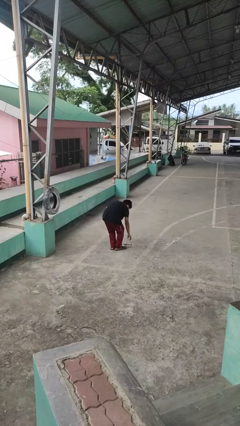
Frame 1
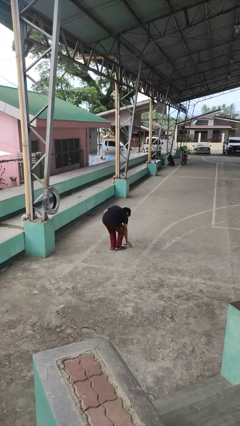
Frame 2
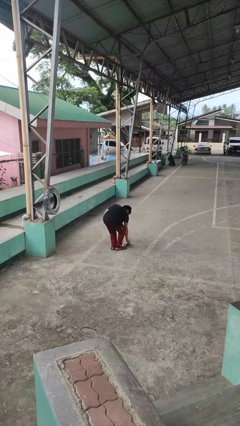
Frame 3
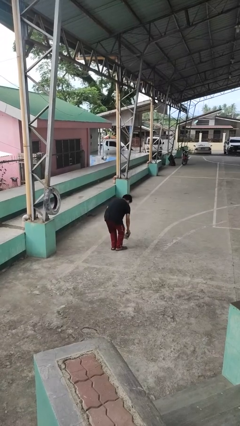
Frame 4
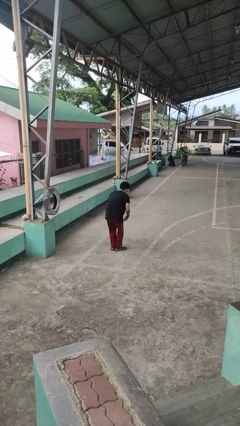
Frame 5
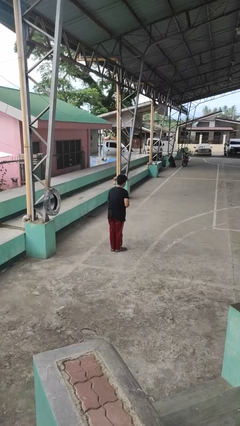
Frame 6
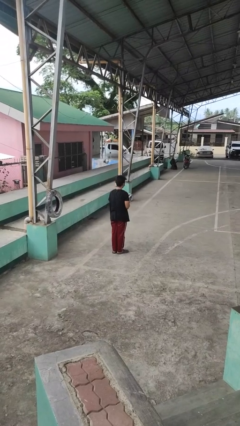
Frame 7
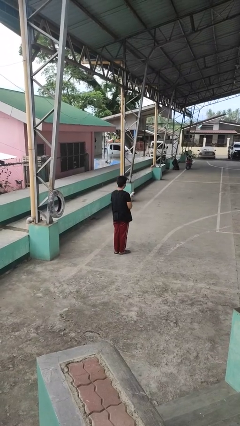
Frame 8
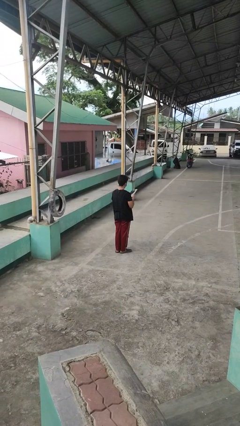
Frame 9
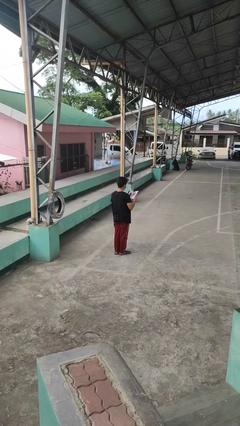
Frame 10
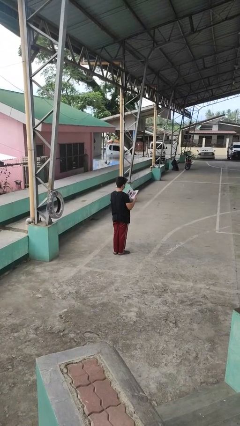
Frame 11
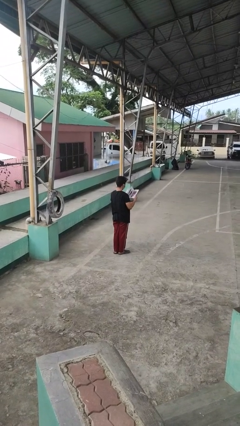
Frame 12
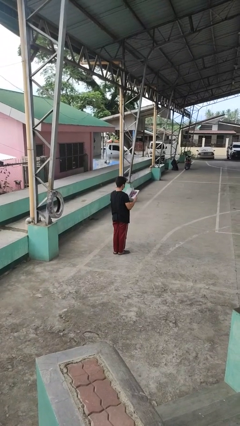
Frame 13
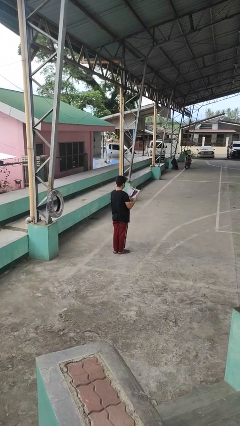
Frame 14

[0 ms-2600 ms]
person picks up object from floor

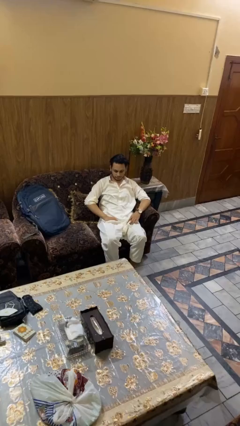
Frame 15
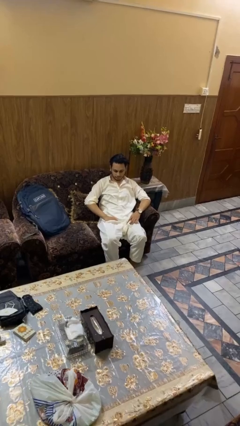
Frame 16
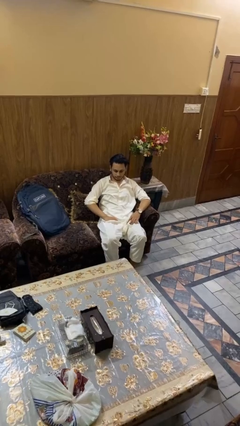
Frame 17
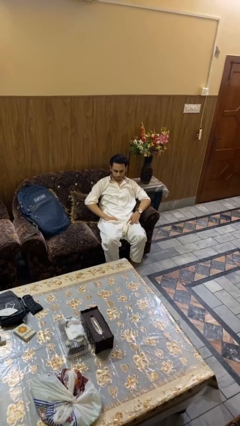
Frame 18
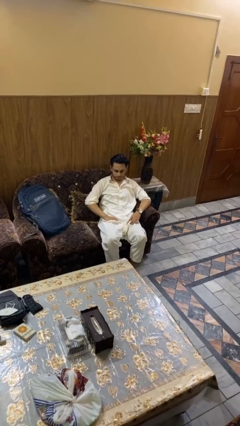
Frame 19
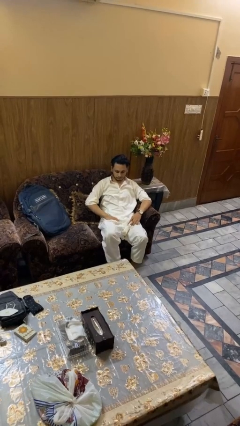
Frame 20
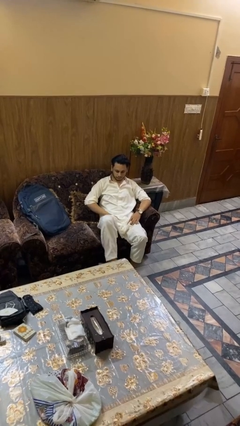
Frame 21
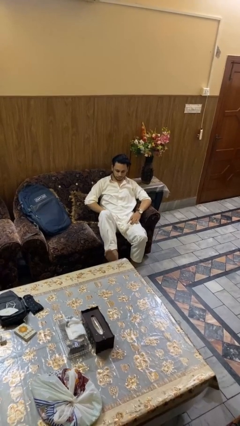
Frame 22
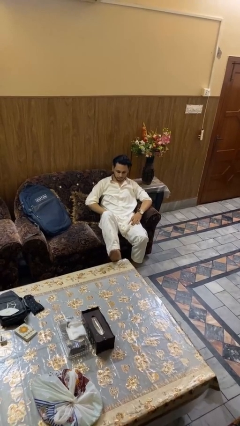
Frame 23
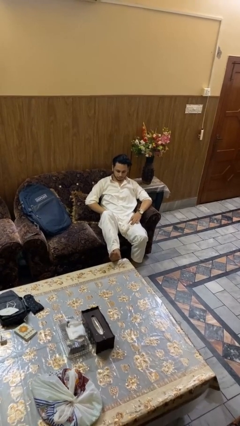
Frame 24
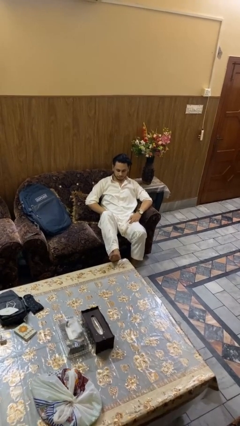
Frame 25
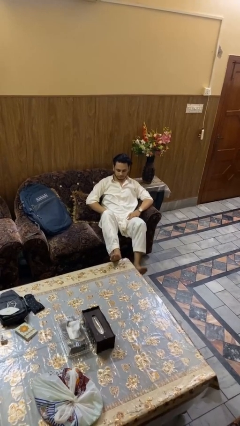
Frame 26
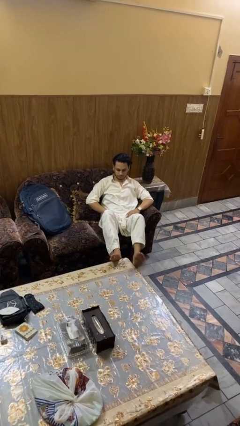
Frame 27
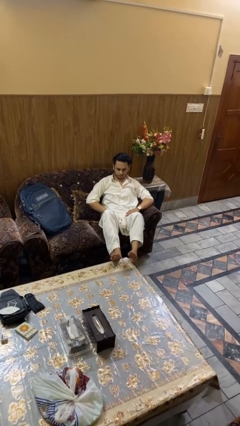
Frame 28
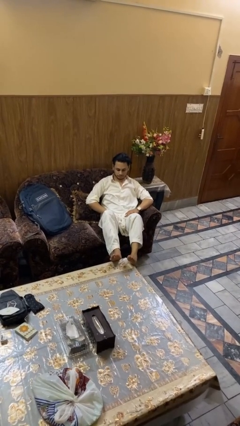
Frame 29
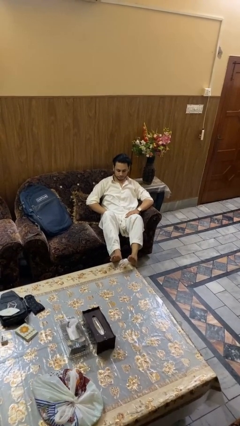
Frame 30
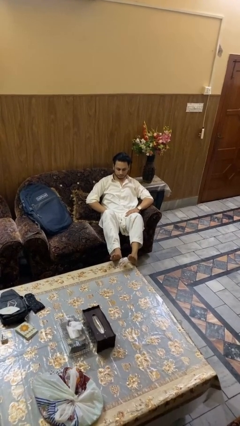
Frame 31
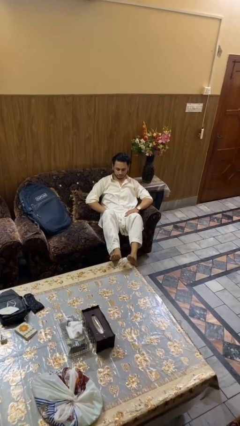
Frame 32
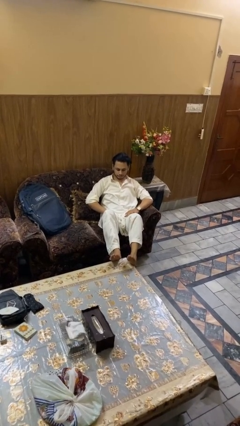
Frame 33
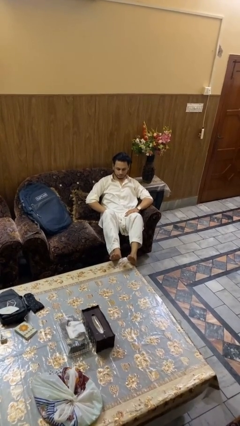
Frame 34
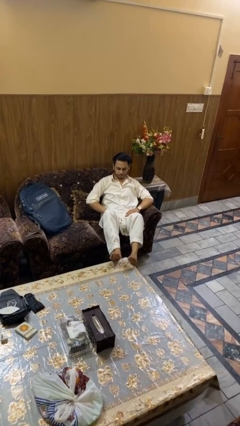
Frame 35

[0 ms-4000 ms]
person puts feet up

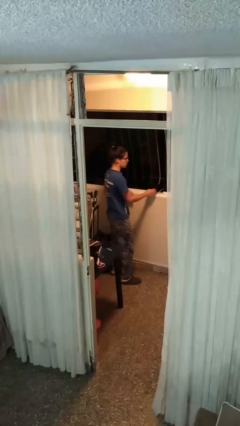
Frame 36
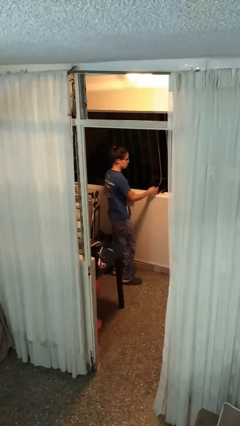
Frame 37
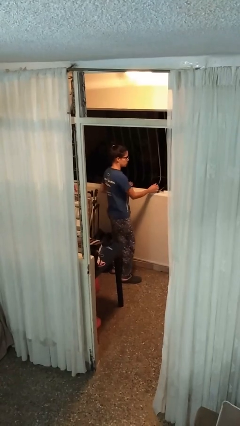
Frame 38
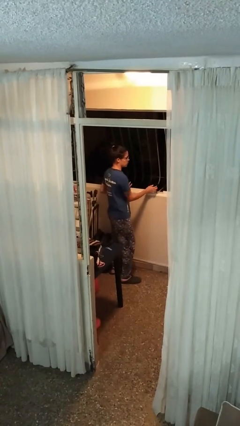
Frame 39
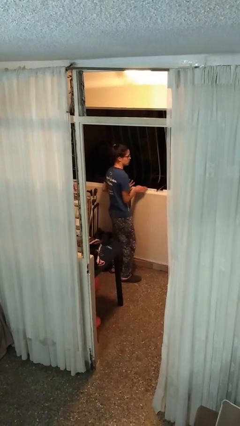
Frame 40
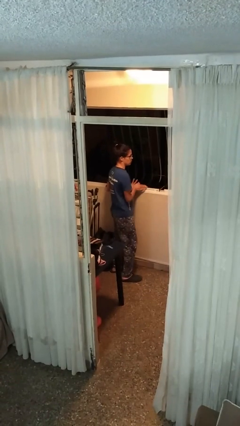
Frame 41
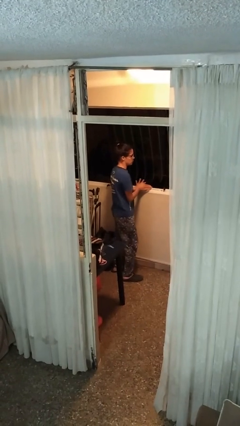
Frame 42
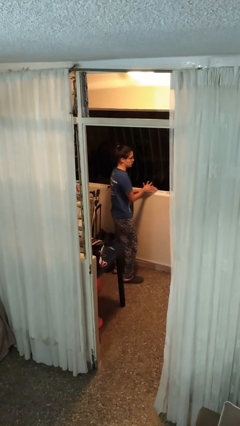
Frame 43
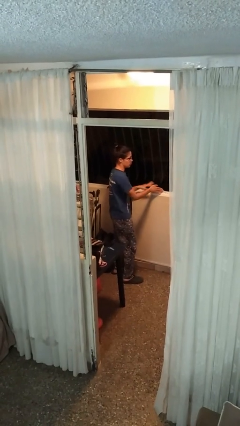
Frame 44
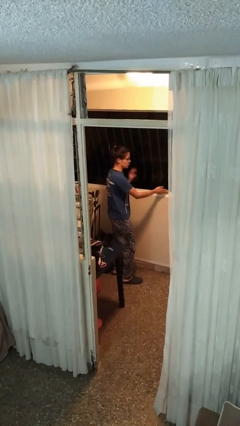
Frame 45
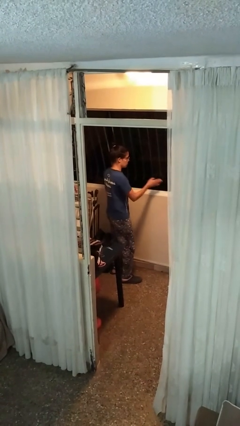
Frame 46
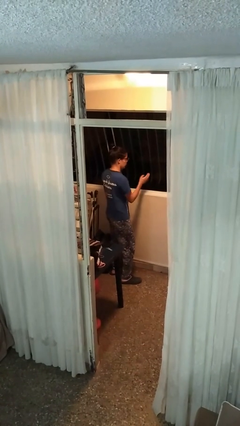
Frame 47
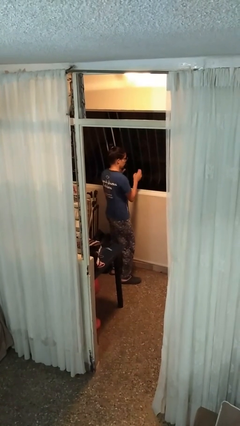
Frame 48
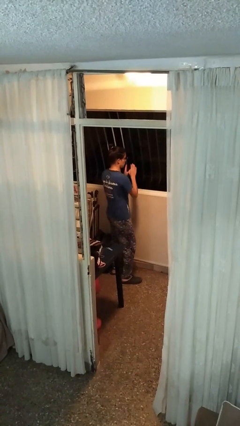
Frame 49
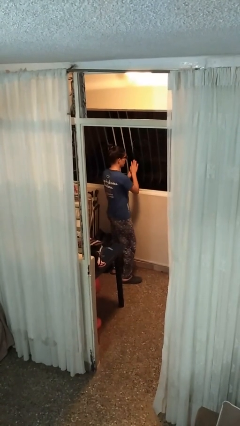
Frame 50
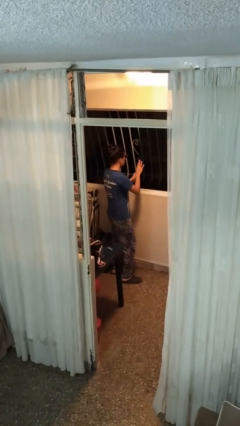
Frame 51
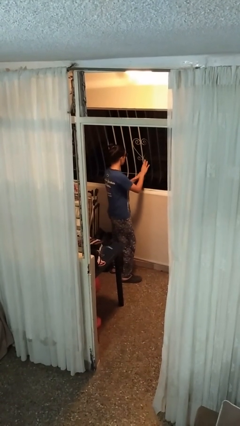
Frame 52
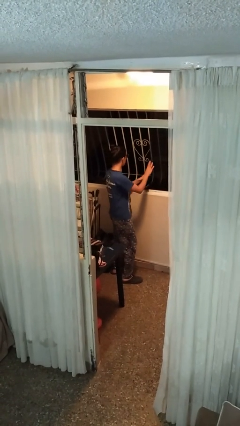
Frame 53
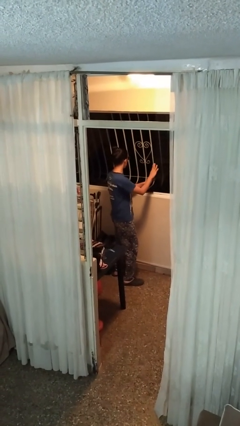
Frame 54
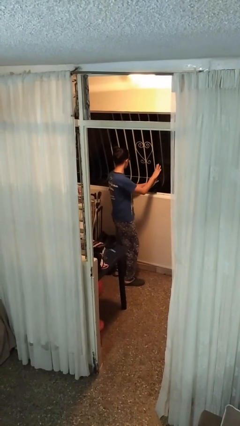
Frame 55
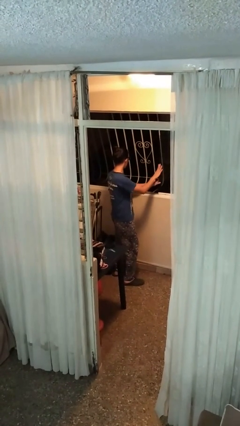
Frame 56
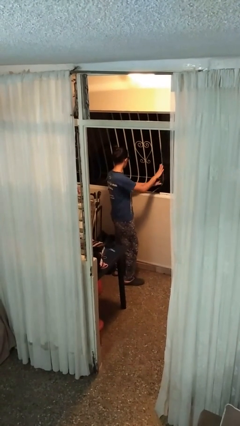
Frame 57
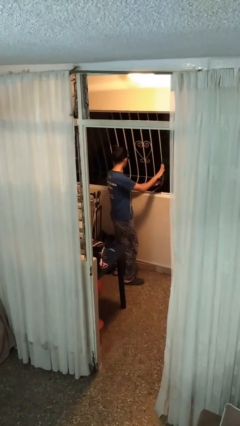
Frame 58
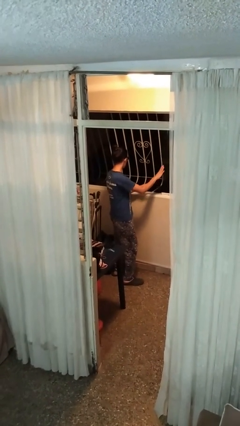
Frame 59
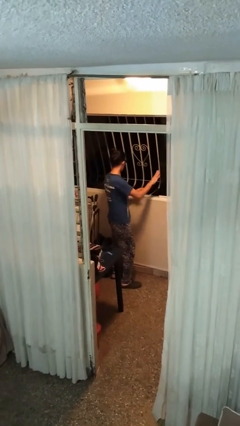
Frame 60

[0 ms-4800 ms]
person opens home window

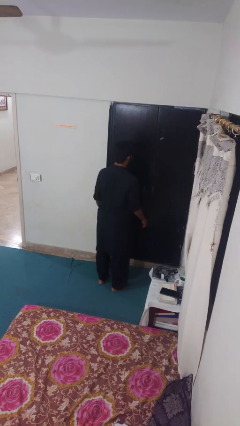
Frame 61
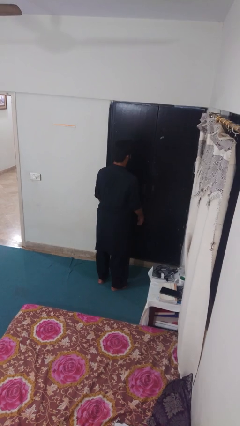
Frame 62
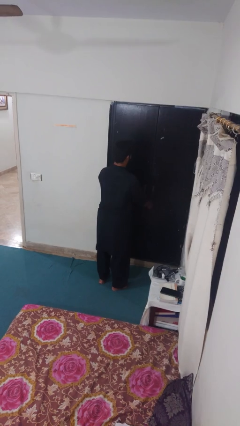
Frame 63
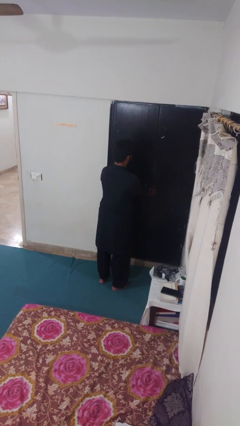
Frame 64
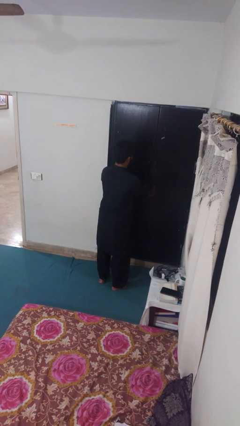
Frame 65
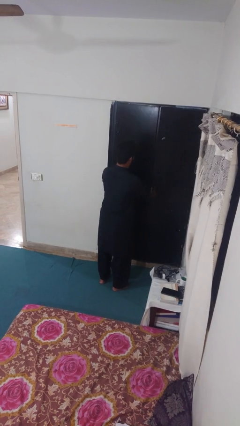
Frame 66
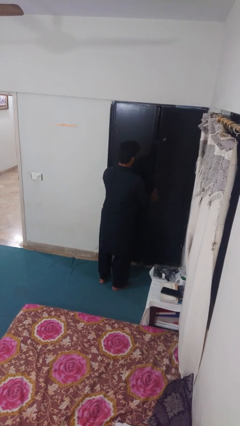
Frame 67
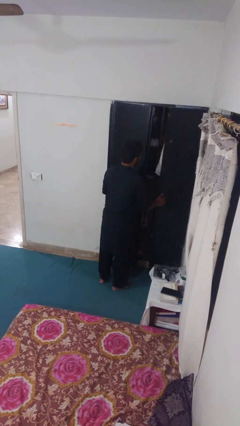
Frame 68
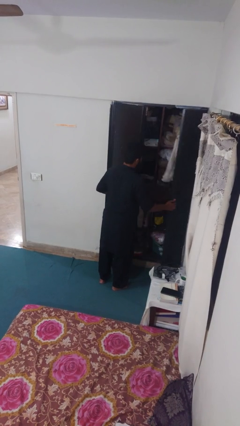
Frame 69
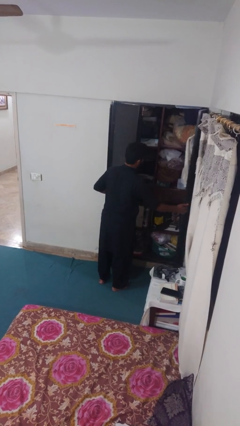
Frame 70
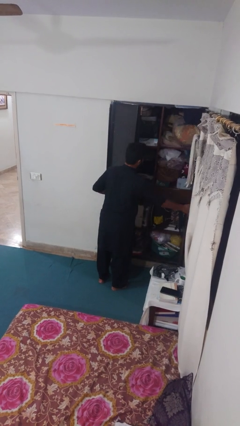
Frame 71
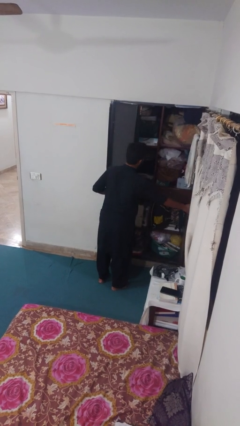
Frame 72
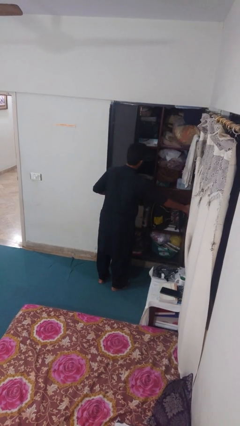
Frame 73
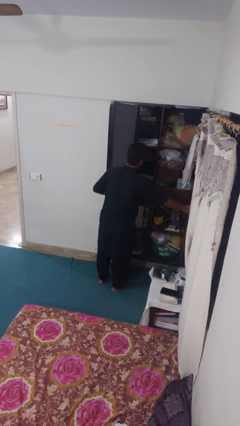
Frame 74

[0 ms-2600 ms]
person opens closet door

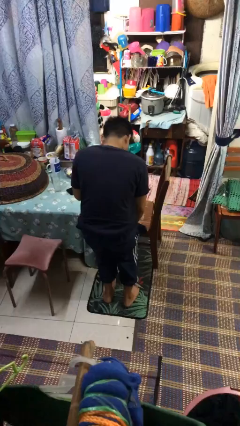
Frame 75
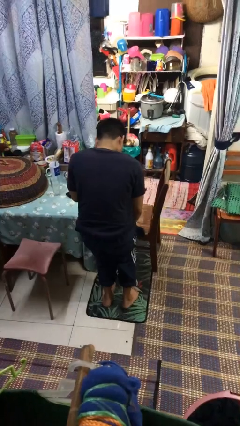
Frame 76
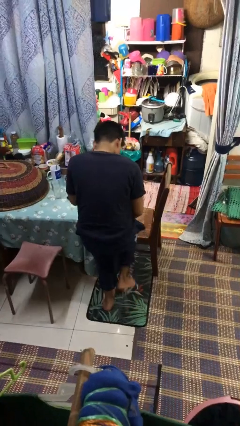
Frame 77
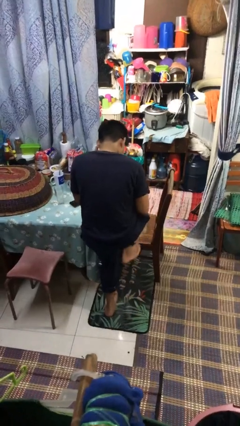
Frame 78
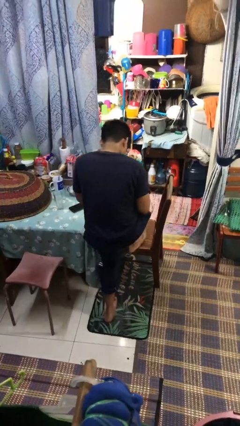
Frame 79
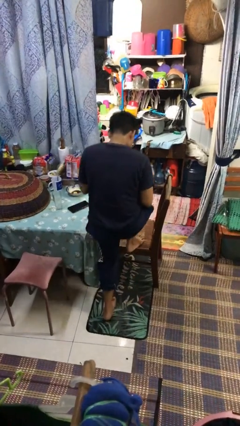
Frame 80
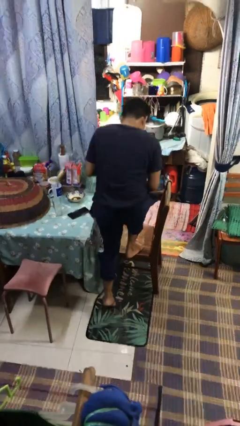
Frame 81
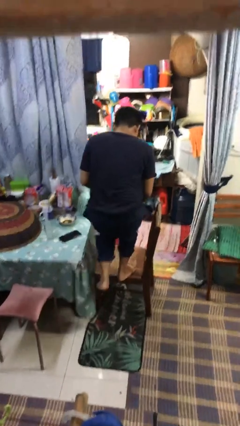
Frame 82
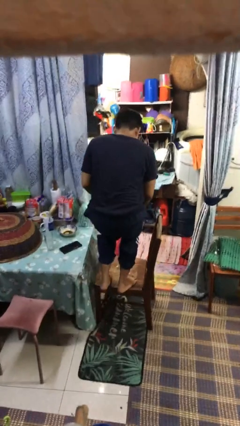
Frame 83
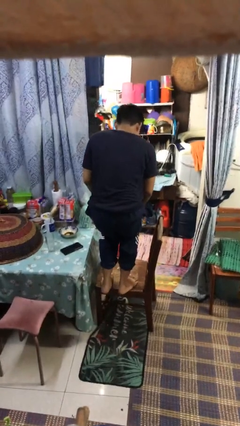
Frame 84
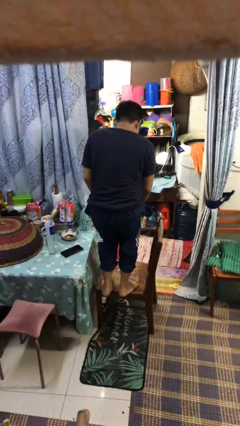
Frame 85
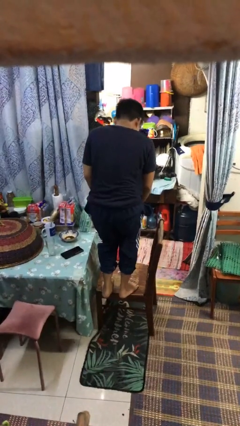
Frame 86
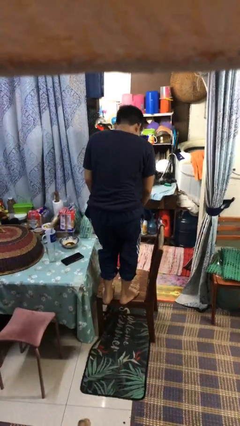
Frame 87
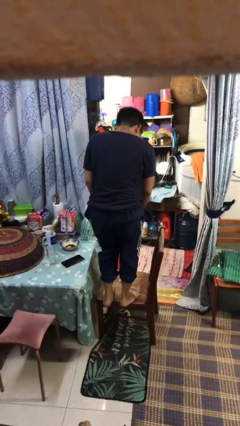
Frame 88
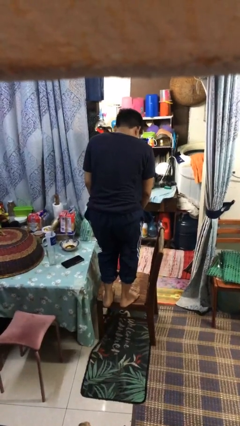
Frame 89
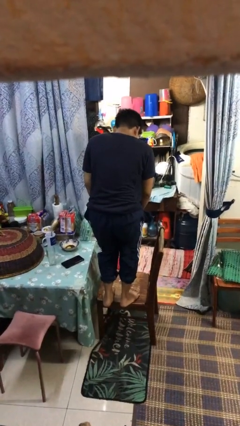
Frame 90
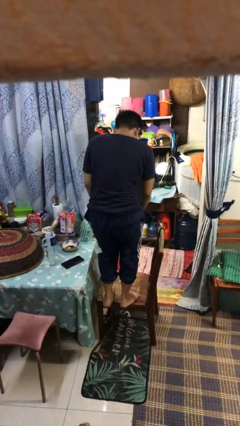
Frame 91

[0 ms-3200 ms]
person climbs on chair

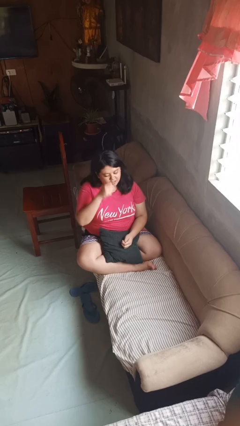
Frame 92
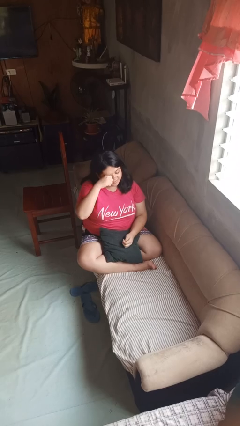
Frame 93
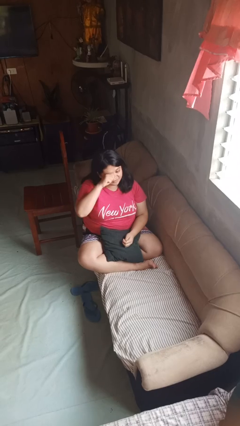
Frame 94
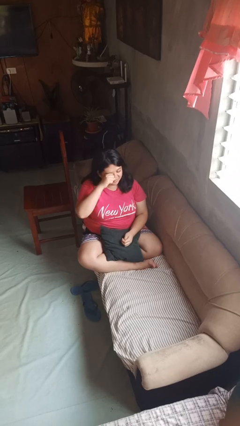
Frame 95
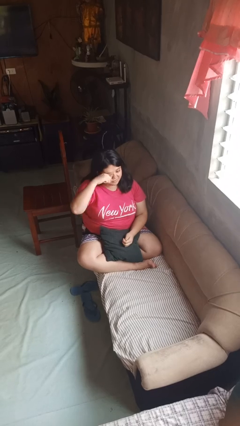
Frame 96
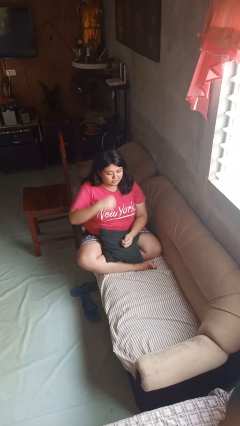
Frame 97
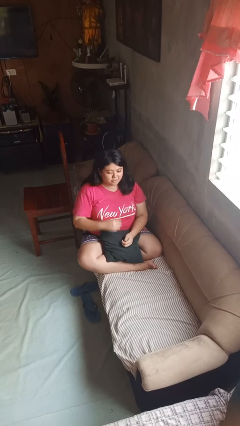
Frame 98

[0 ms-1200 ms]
person rubs eyes
